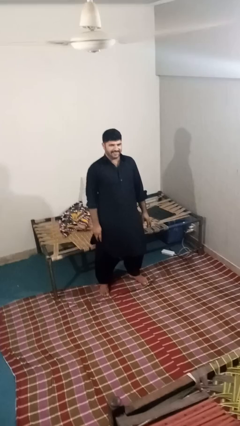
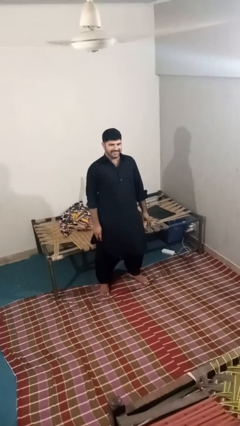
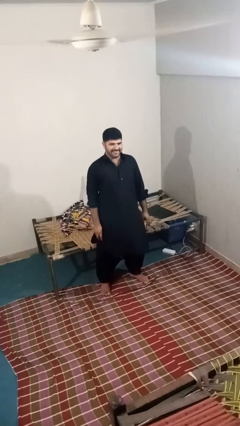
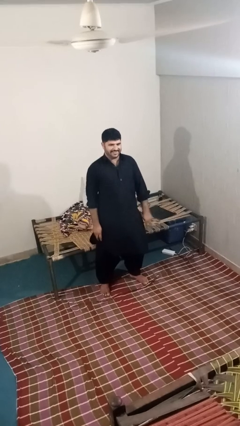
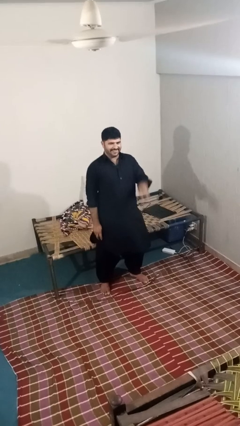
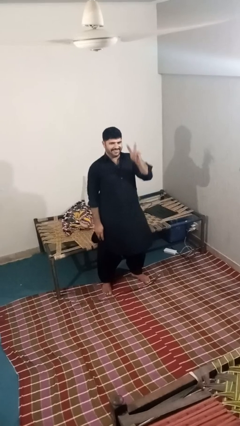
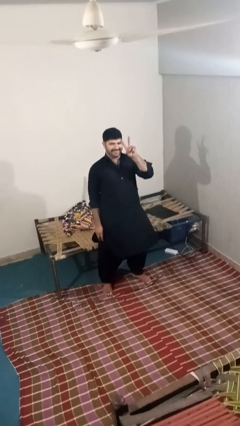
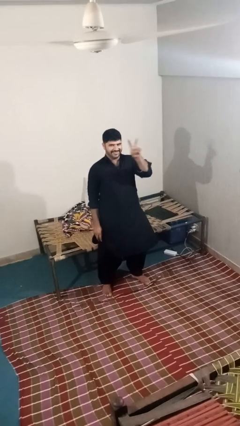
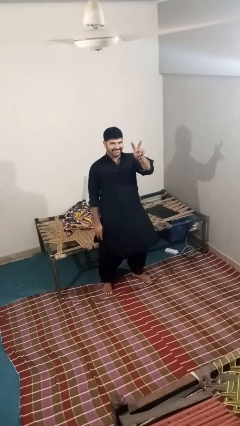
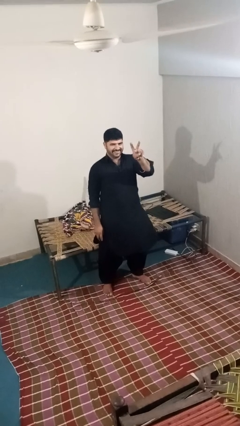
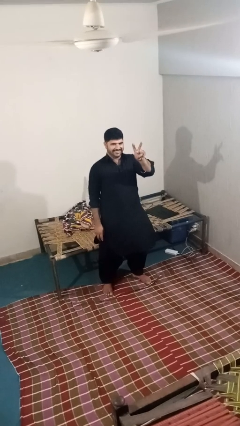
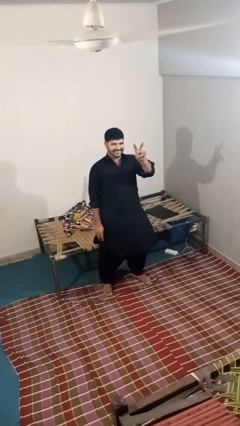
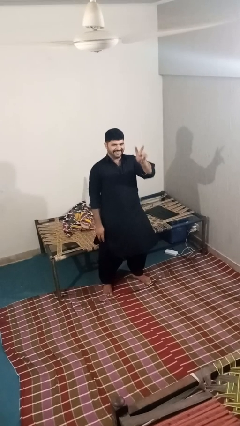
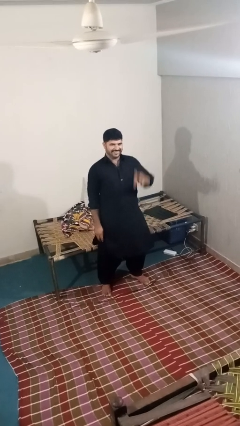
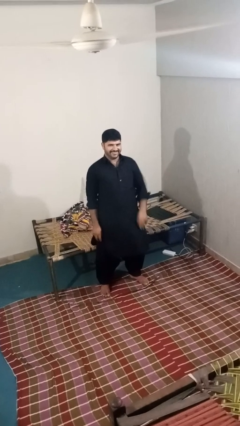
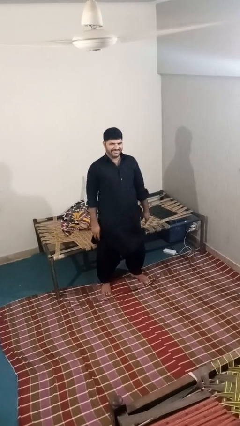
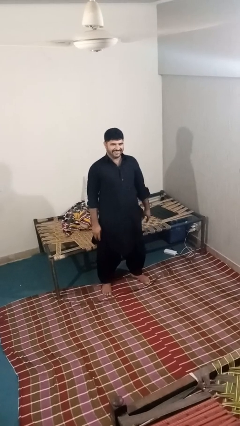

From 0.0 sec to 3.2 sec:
person gestures peace

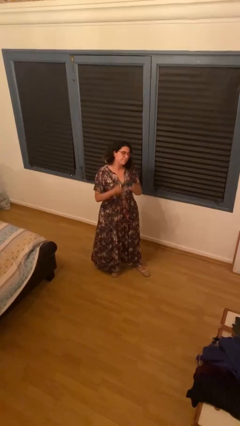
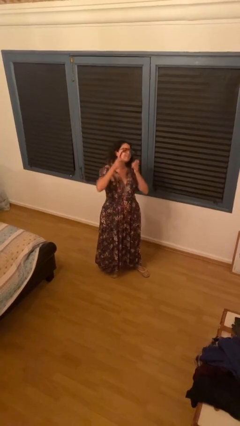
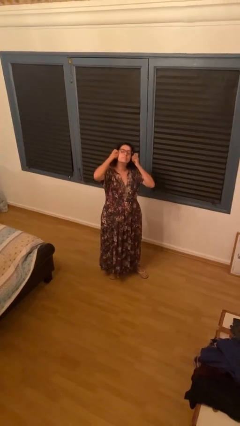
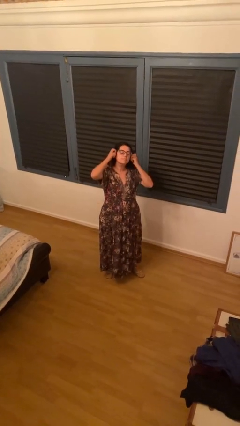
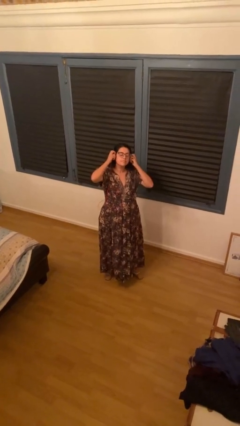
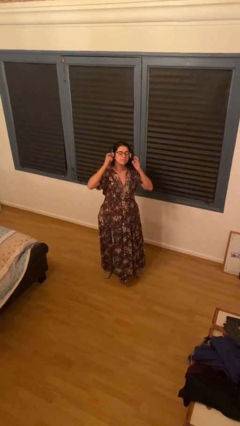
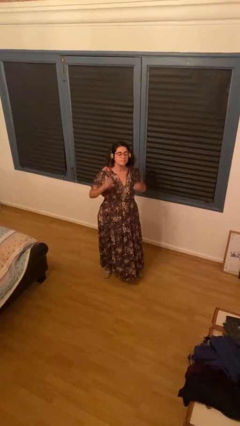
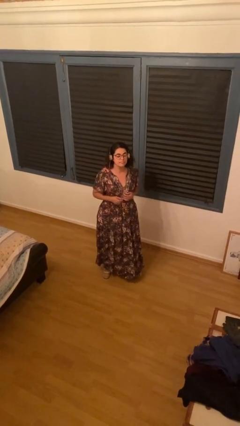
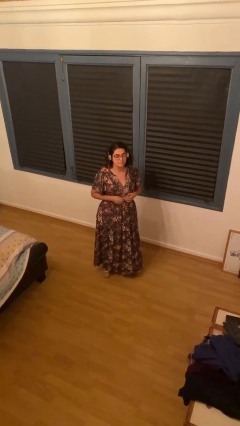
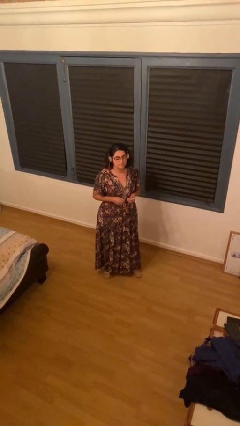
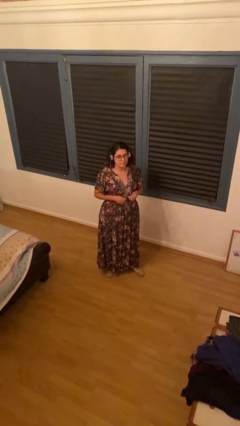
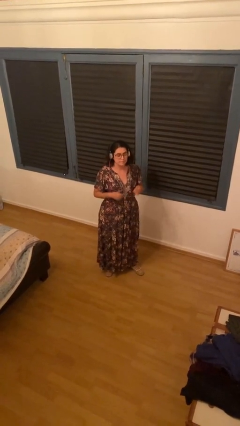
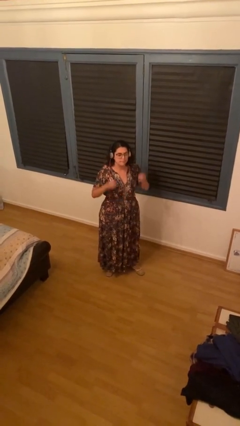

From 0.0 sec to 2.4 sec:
person puts on headphones

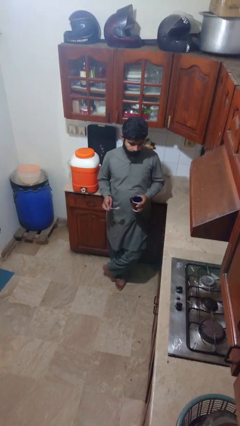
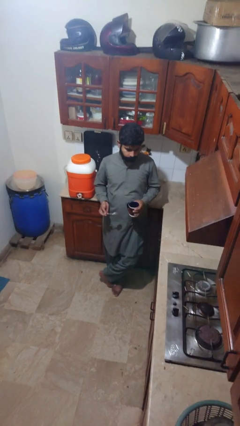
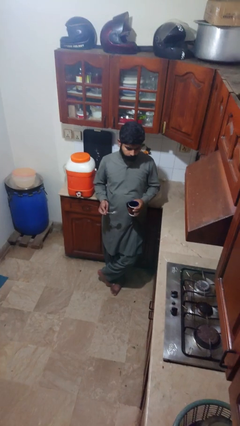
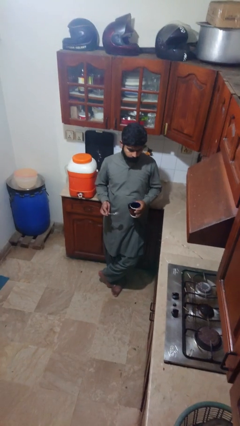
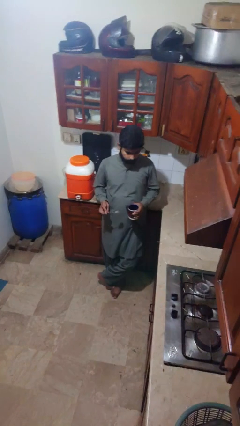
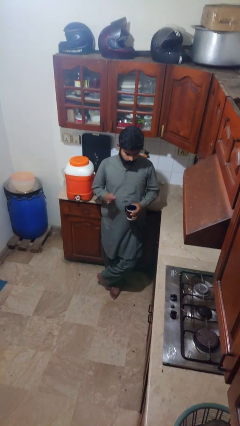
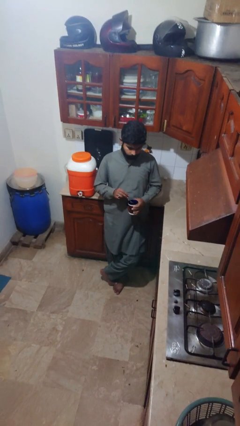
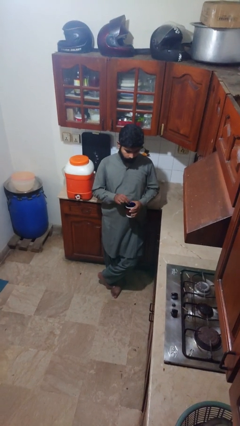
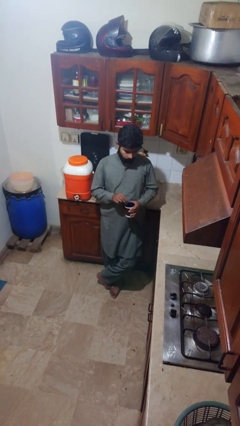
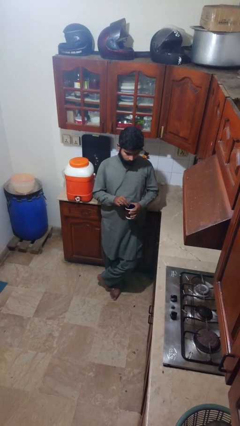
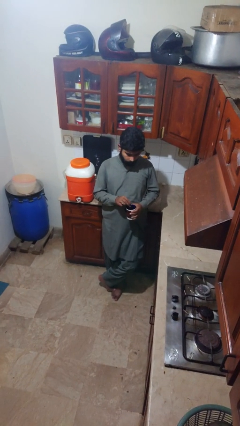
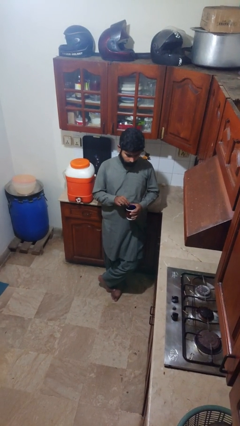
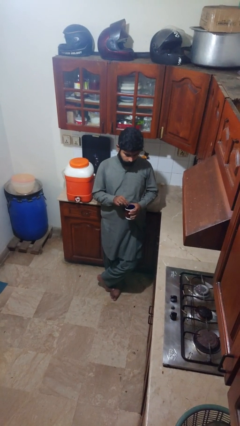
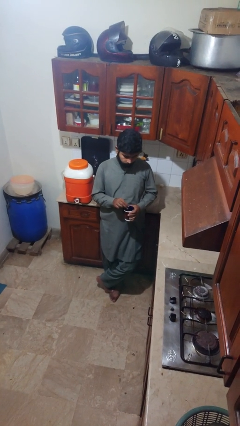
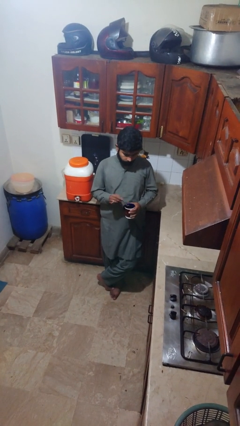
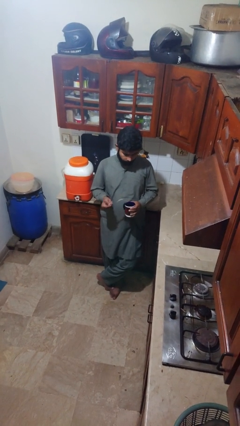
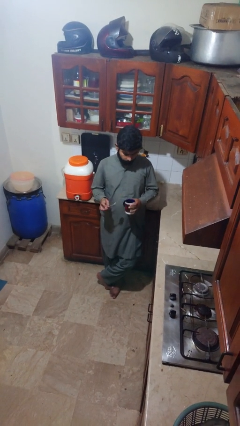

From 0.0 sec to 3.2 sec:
person stirs mug

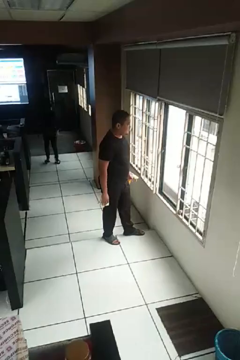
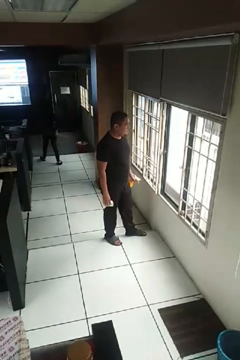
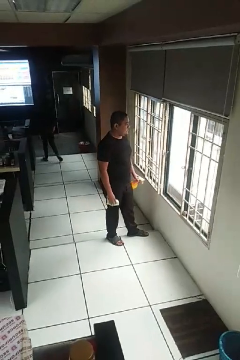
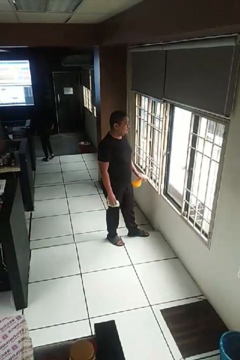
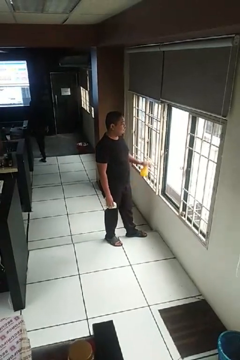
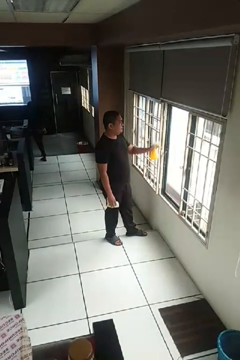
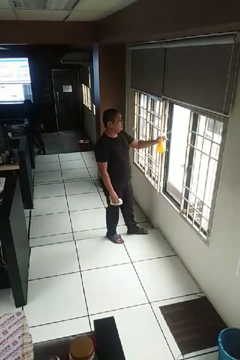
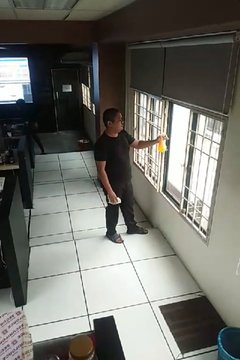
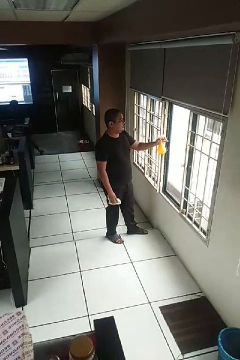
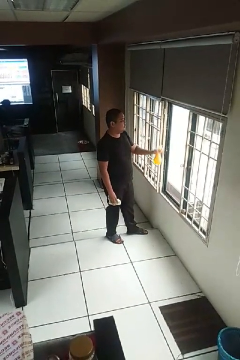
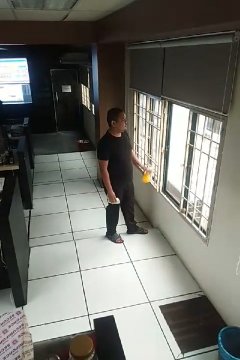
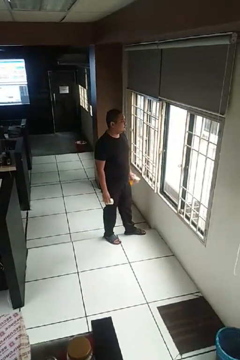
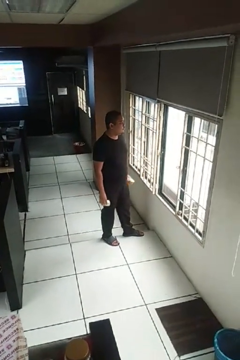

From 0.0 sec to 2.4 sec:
person sprays from bottle

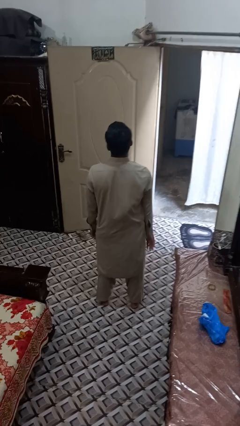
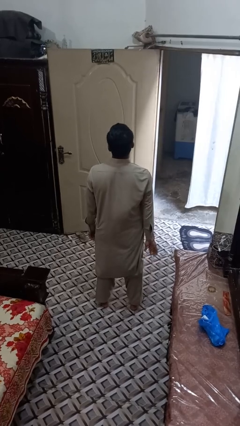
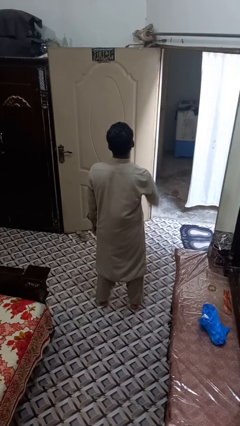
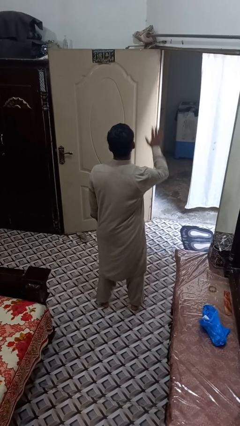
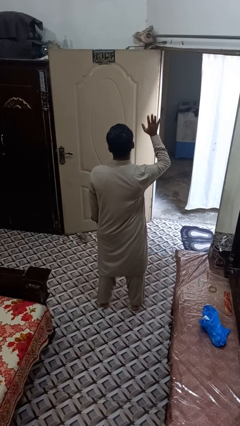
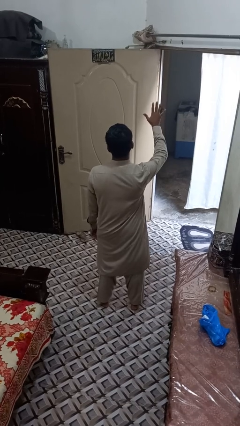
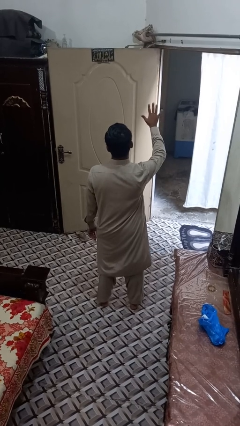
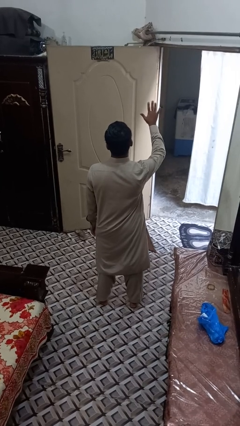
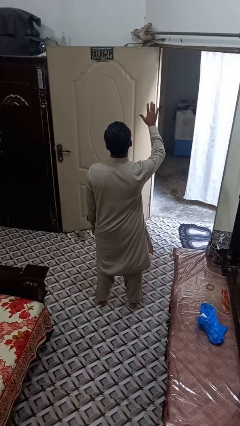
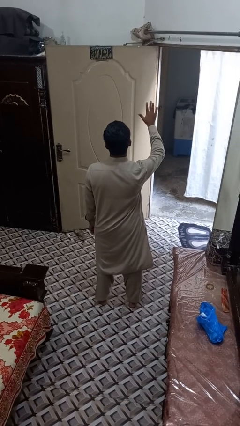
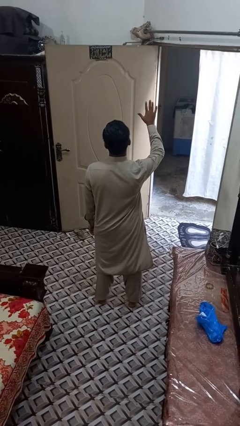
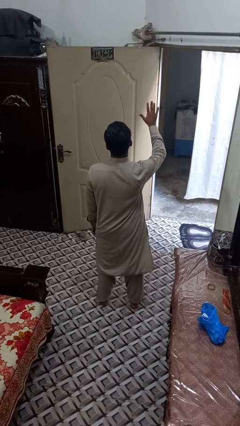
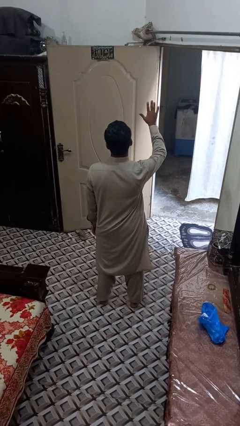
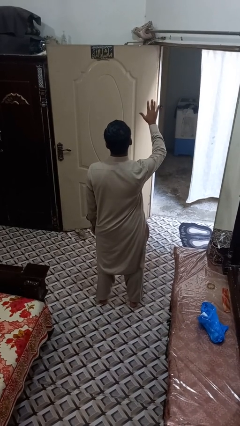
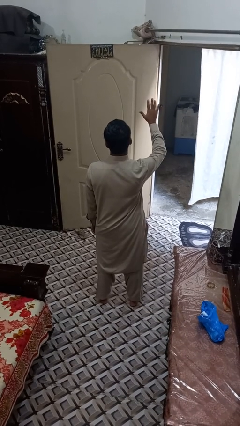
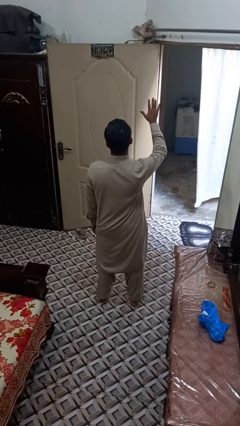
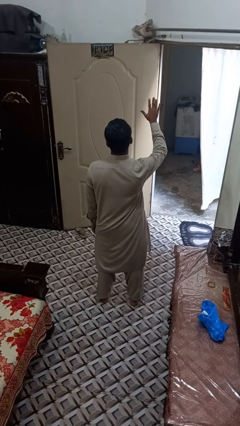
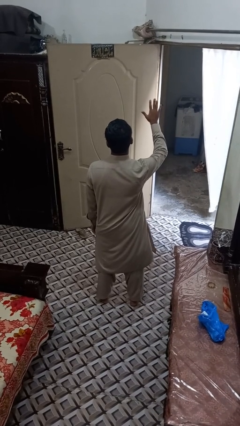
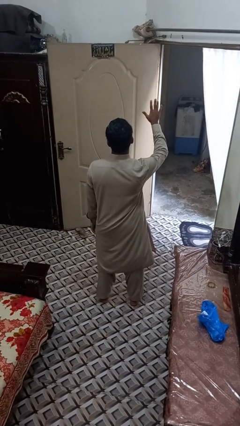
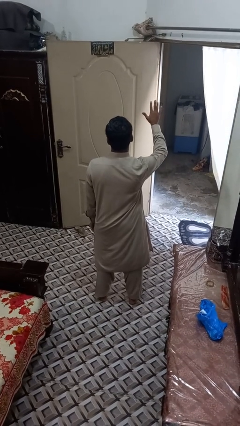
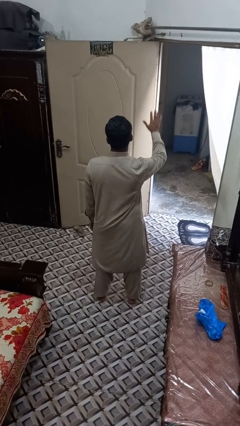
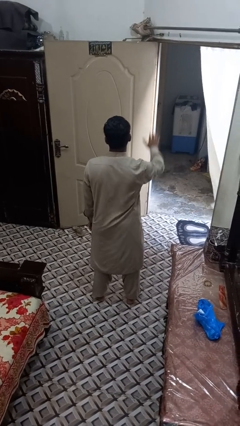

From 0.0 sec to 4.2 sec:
person gestures number five

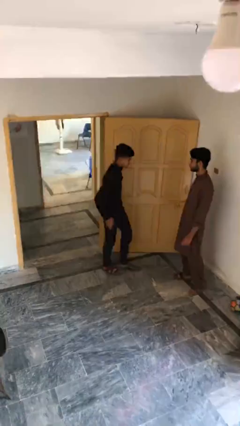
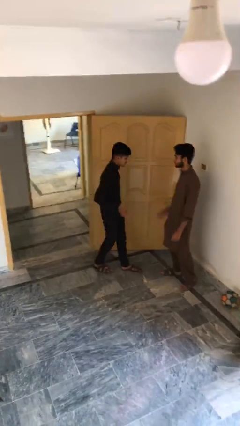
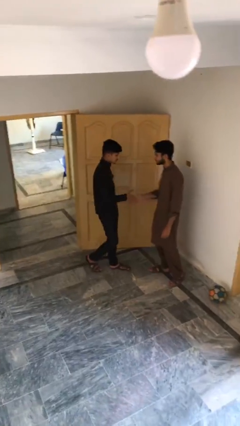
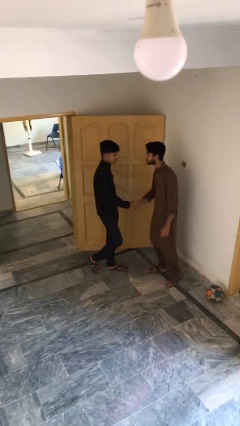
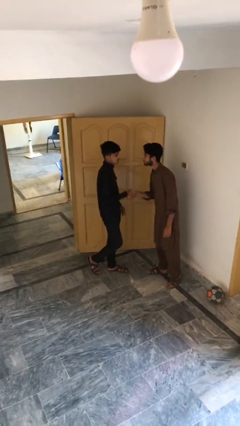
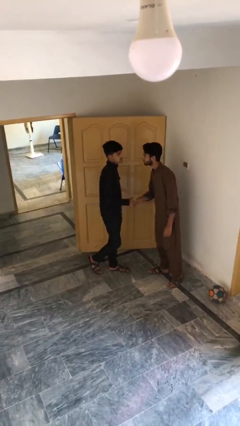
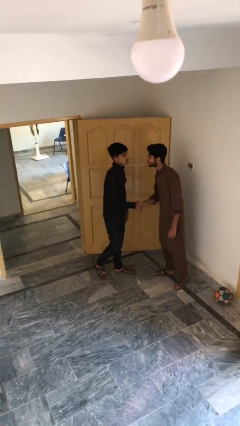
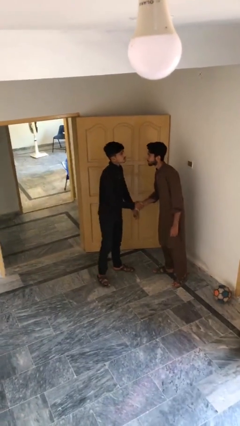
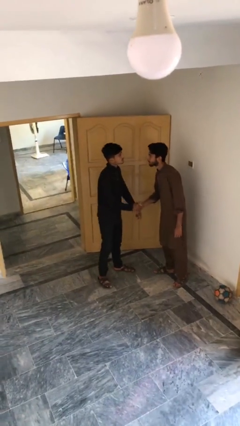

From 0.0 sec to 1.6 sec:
person shakes hand

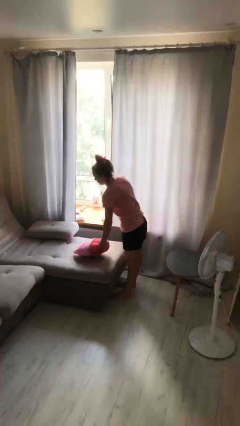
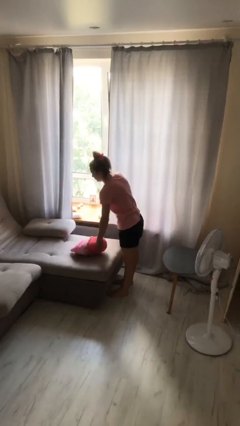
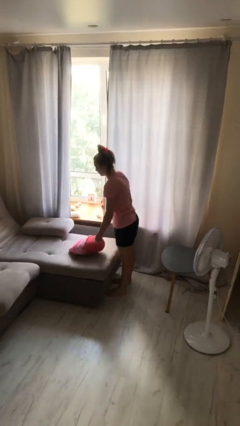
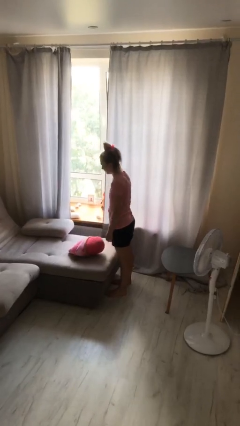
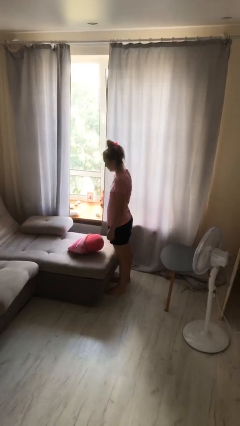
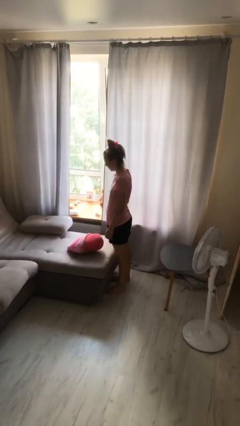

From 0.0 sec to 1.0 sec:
person puts down object on couch
